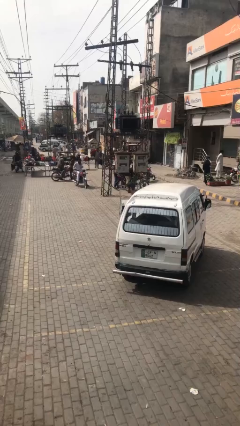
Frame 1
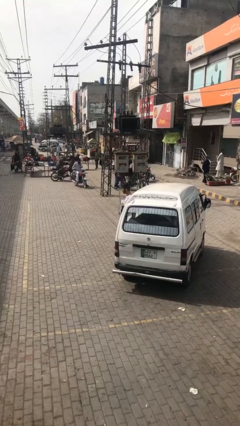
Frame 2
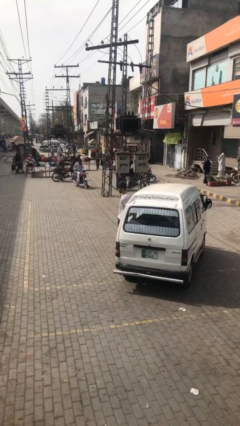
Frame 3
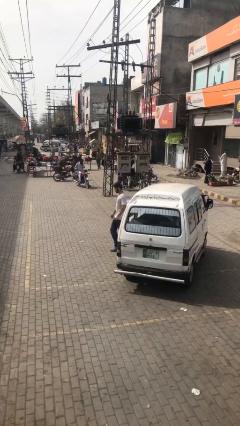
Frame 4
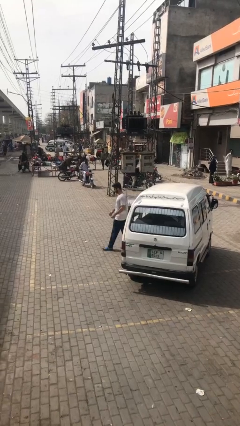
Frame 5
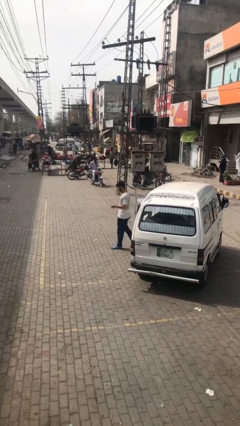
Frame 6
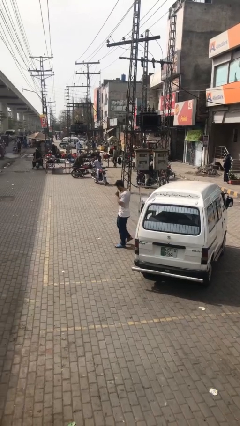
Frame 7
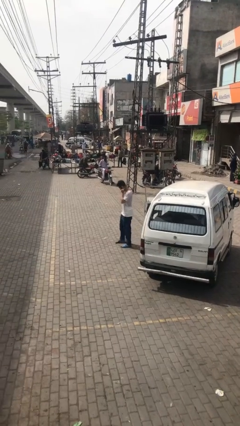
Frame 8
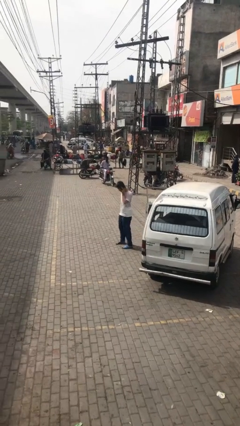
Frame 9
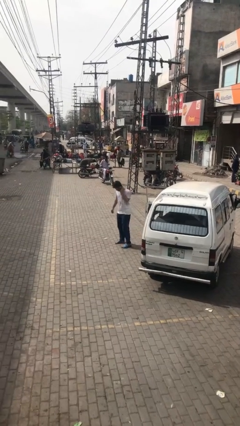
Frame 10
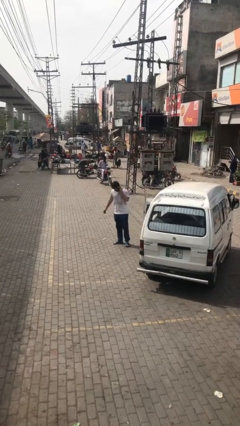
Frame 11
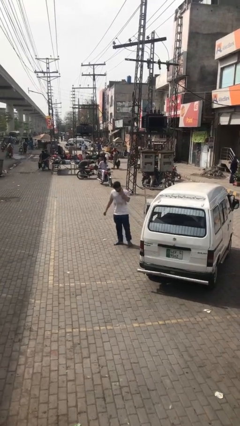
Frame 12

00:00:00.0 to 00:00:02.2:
person exits car

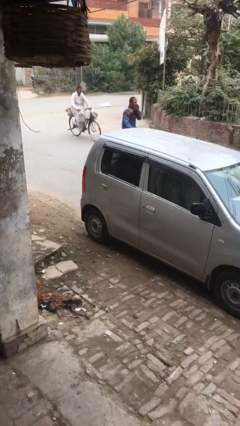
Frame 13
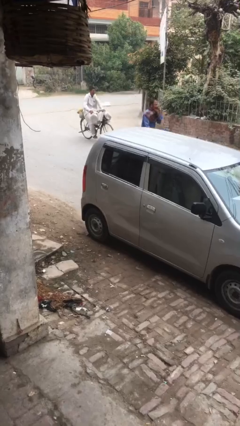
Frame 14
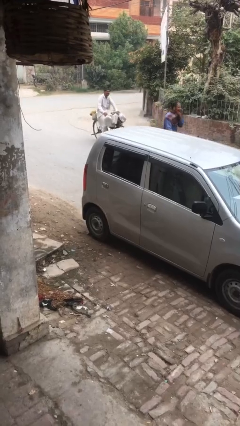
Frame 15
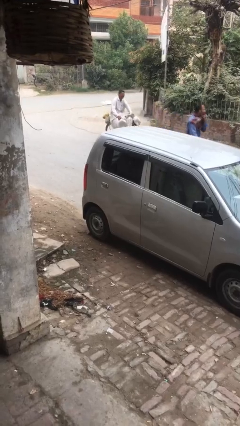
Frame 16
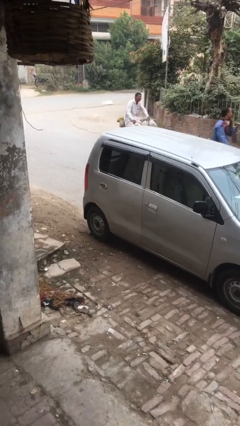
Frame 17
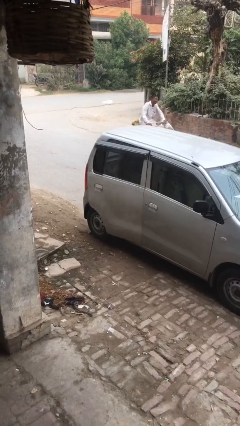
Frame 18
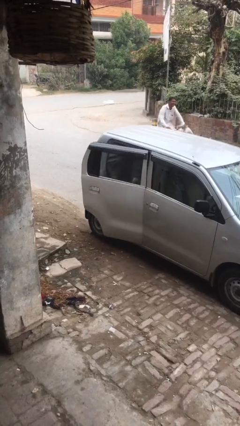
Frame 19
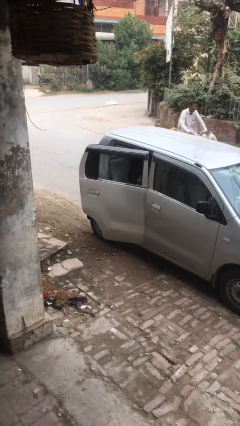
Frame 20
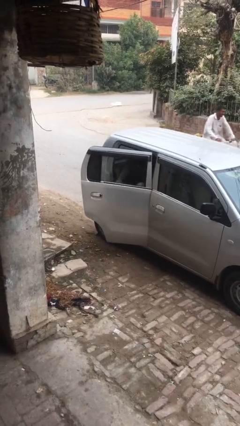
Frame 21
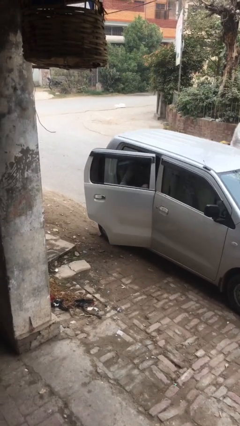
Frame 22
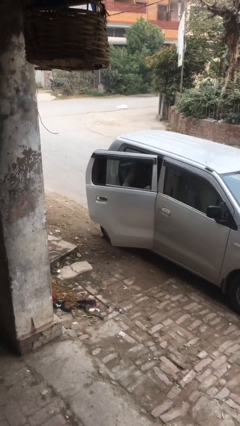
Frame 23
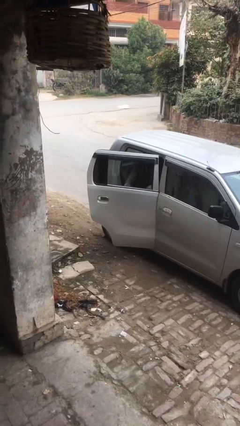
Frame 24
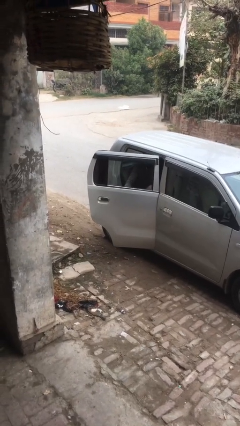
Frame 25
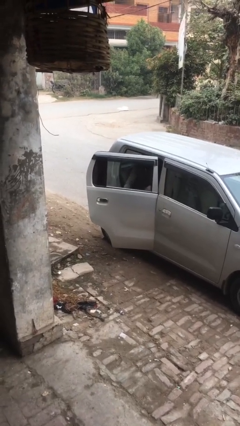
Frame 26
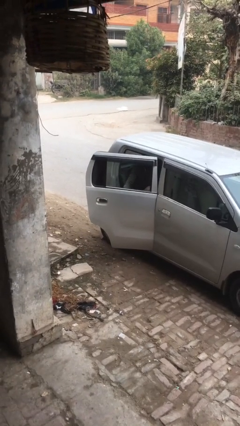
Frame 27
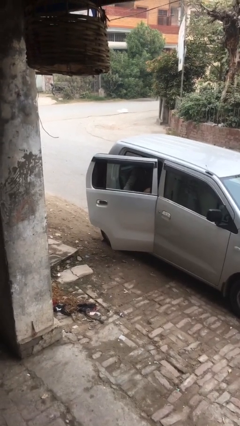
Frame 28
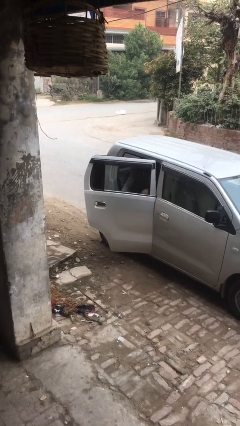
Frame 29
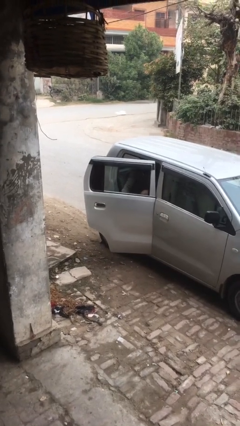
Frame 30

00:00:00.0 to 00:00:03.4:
person opens car door

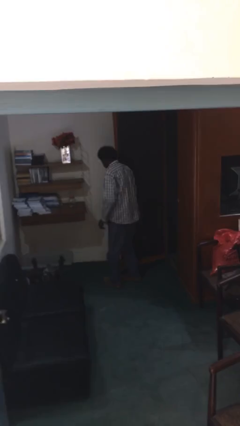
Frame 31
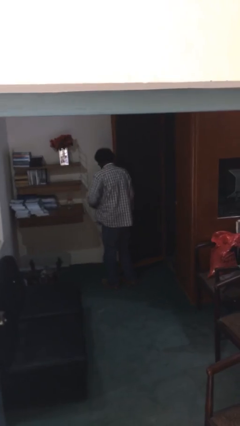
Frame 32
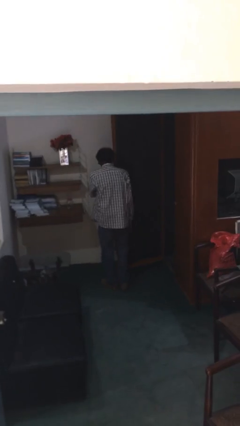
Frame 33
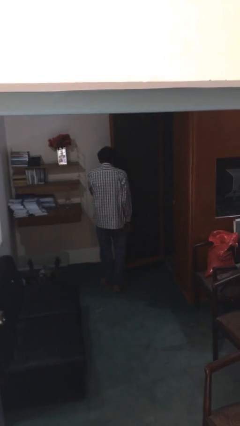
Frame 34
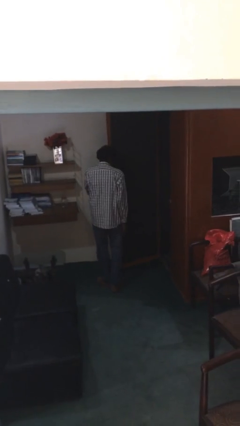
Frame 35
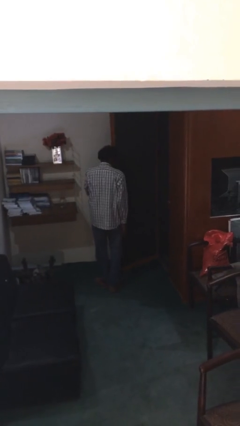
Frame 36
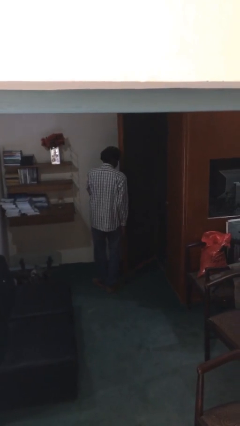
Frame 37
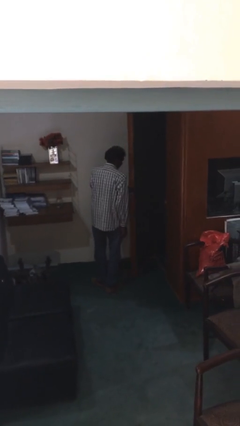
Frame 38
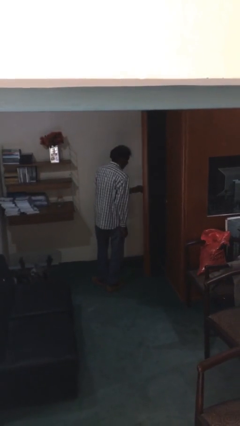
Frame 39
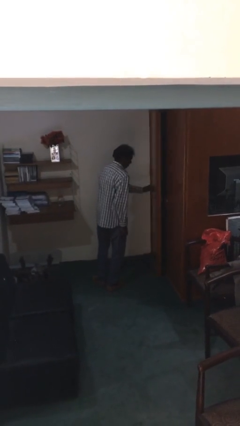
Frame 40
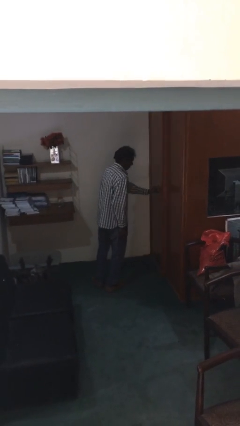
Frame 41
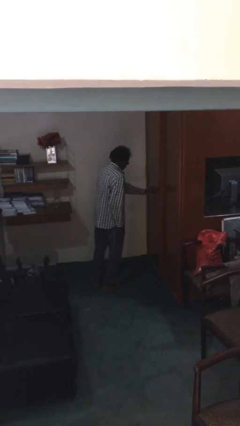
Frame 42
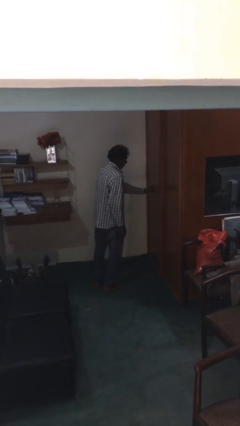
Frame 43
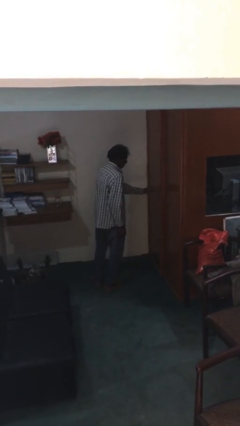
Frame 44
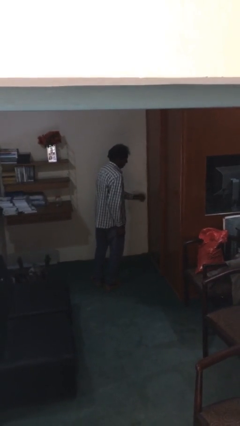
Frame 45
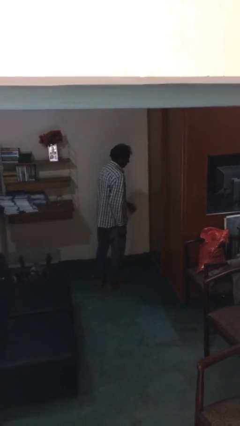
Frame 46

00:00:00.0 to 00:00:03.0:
person closes facility door

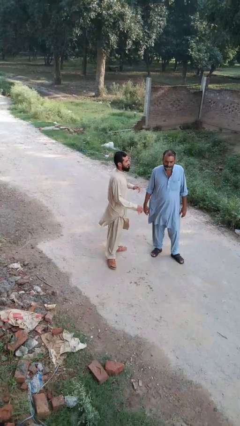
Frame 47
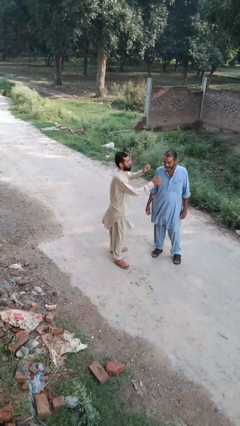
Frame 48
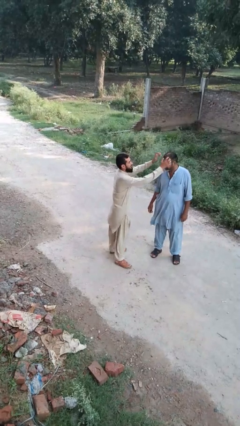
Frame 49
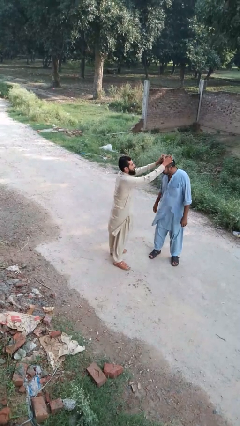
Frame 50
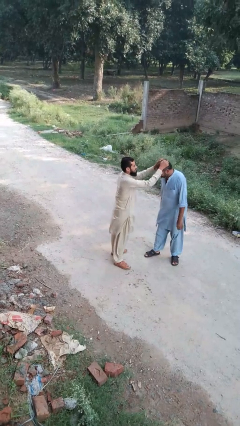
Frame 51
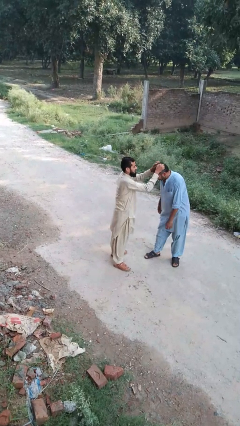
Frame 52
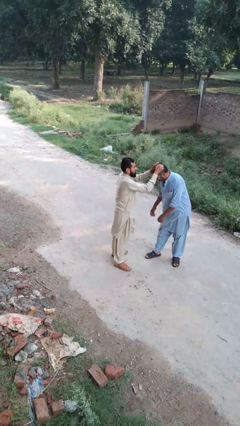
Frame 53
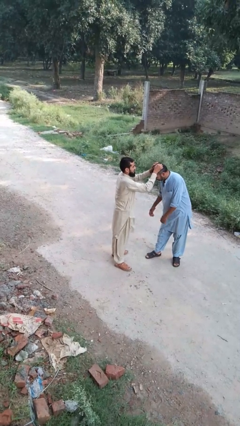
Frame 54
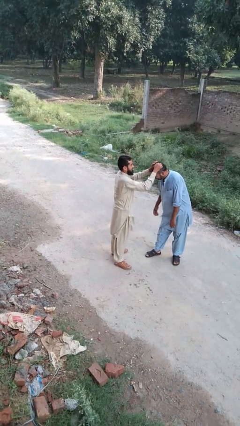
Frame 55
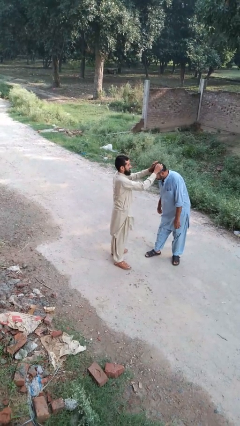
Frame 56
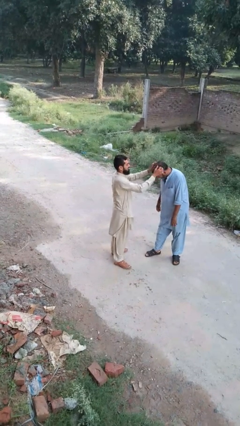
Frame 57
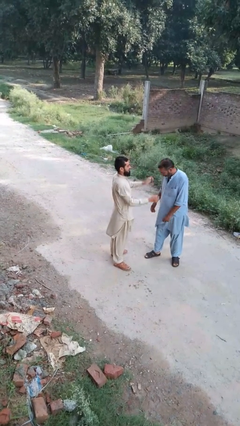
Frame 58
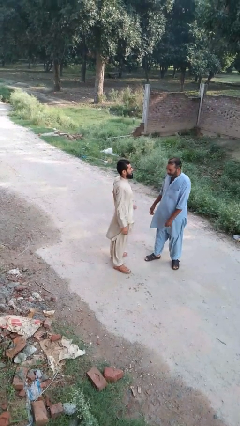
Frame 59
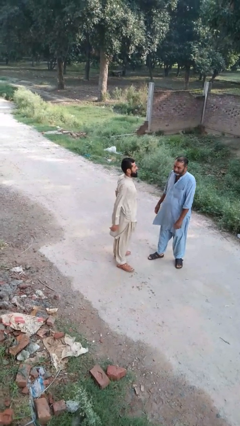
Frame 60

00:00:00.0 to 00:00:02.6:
person grabs person by hair

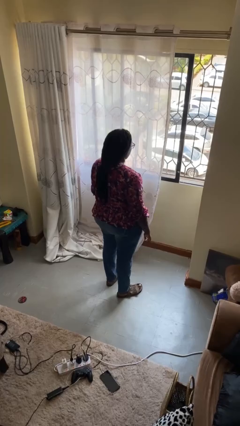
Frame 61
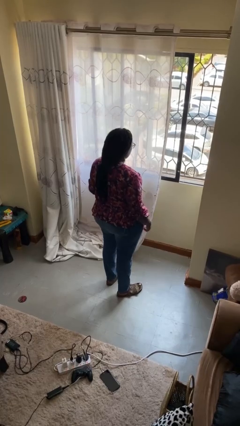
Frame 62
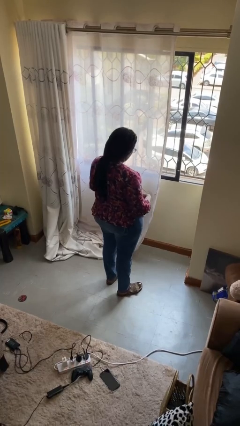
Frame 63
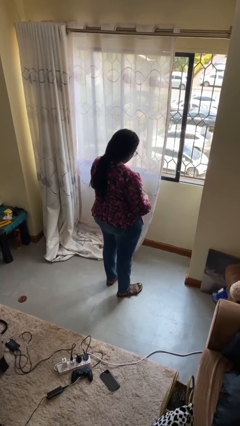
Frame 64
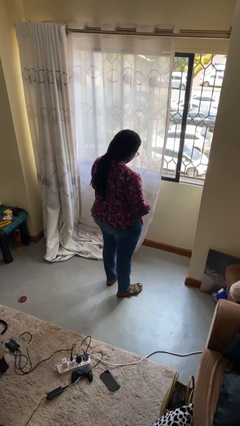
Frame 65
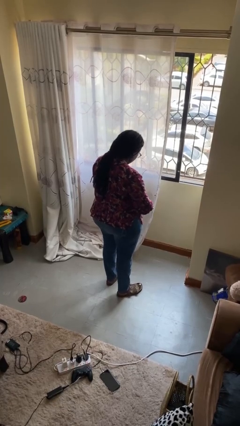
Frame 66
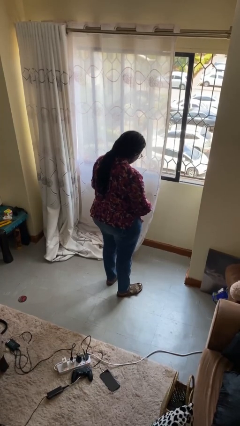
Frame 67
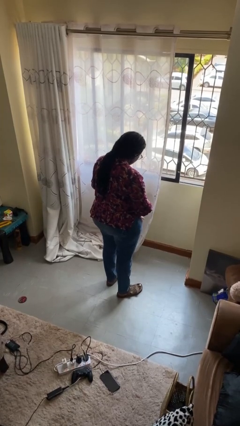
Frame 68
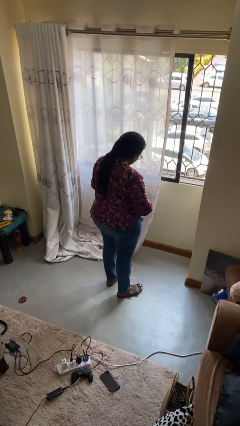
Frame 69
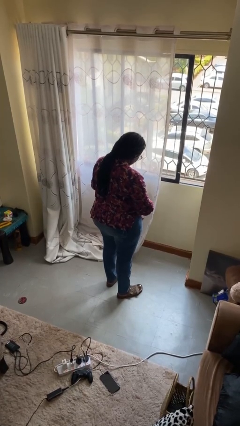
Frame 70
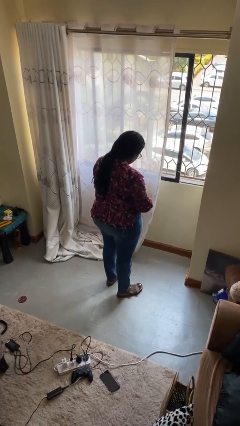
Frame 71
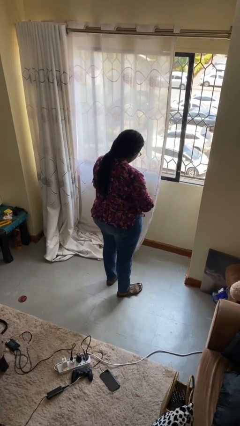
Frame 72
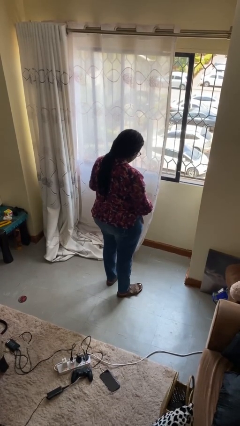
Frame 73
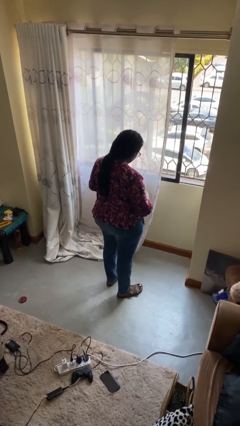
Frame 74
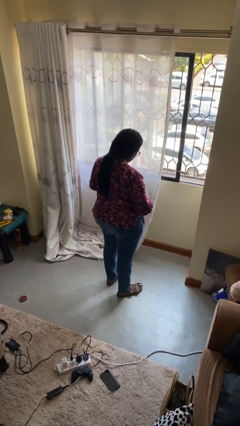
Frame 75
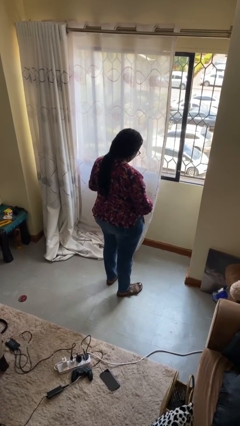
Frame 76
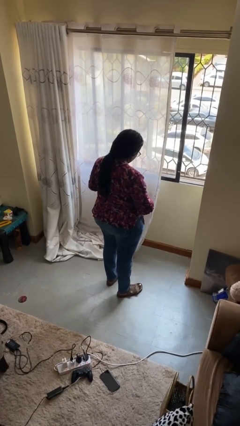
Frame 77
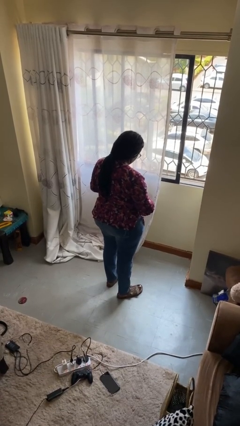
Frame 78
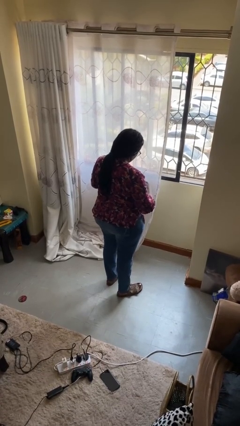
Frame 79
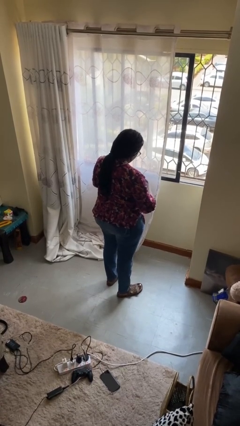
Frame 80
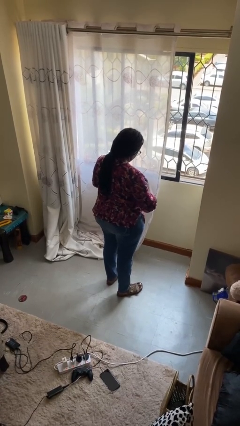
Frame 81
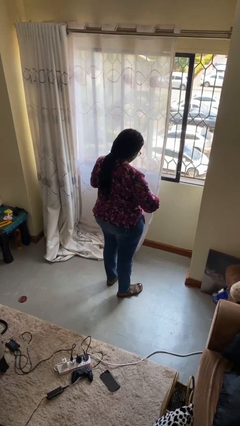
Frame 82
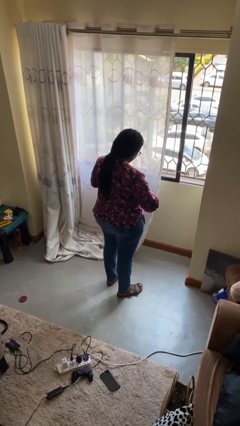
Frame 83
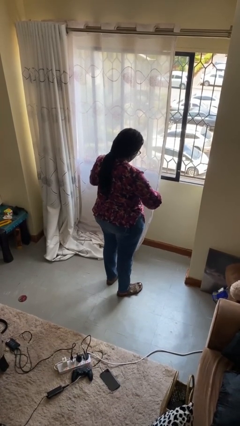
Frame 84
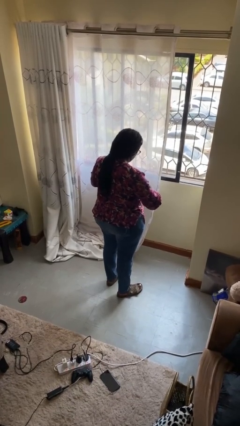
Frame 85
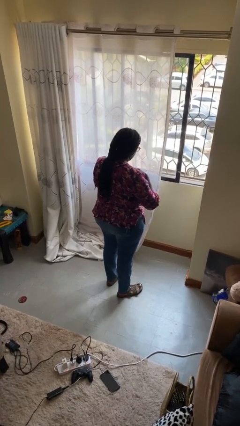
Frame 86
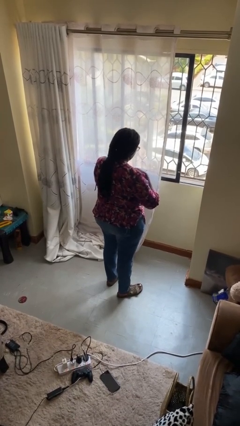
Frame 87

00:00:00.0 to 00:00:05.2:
person buttons shirt

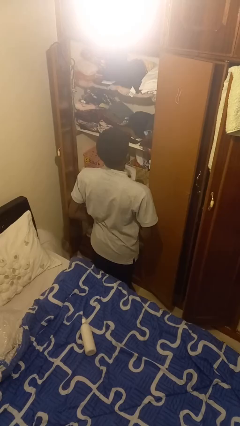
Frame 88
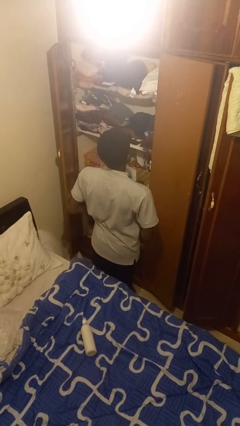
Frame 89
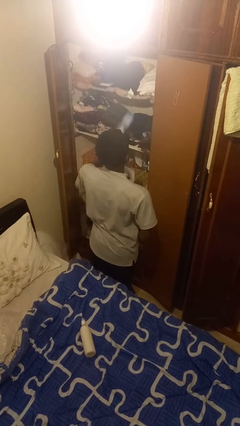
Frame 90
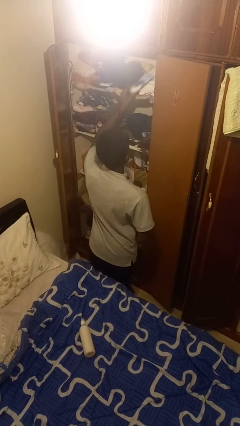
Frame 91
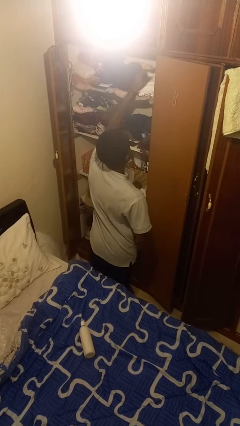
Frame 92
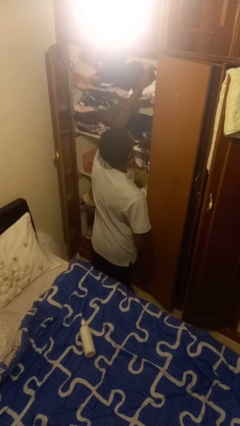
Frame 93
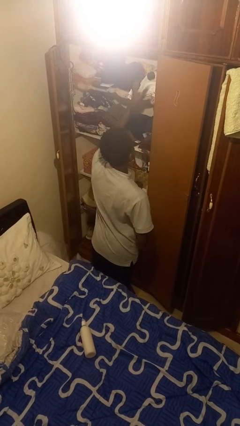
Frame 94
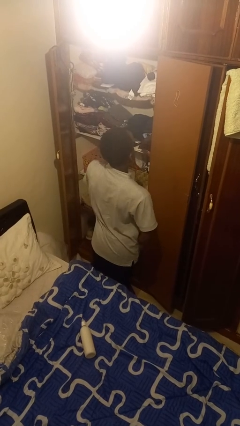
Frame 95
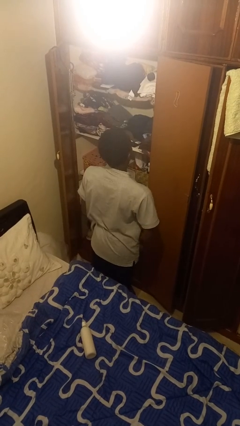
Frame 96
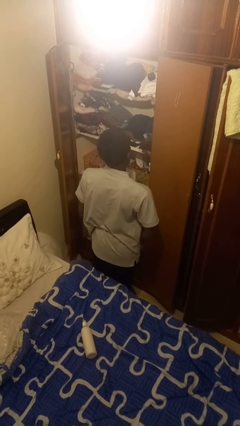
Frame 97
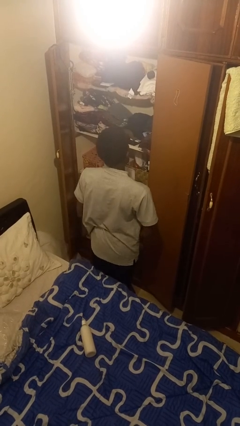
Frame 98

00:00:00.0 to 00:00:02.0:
person puts down object on shelf
